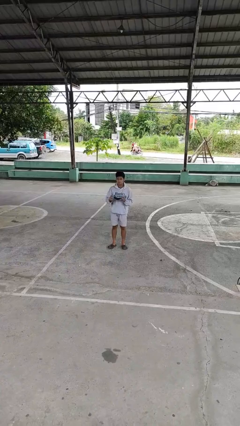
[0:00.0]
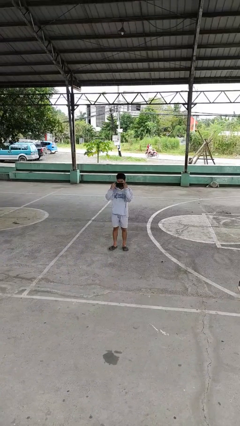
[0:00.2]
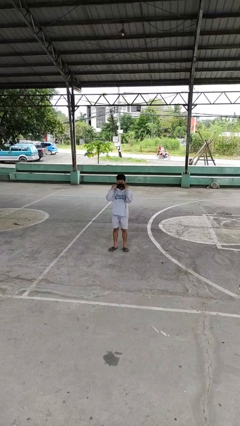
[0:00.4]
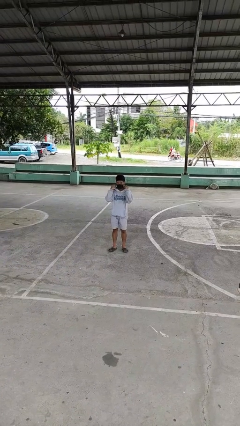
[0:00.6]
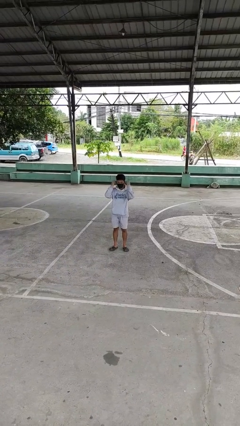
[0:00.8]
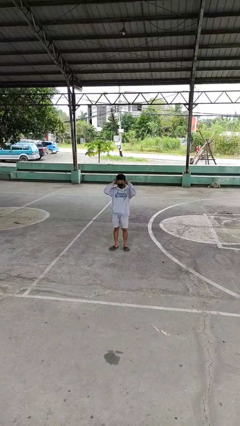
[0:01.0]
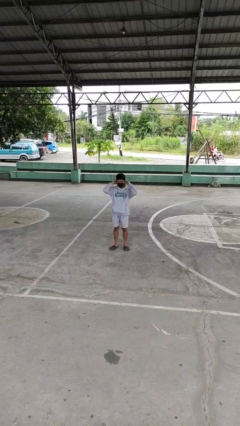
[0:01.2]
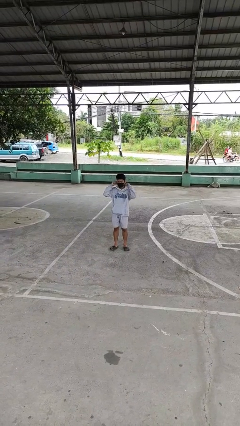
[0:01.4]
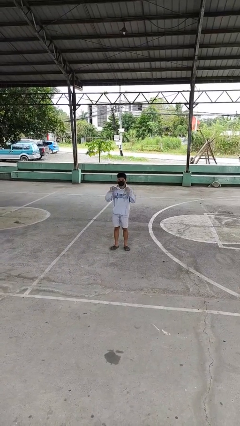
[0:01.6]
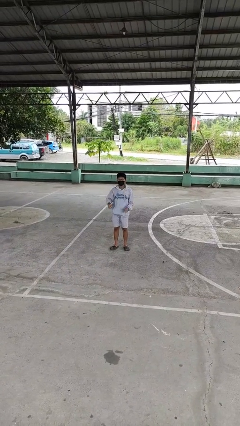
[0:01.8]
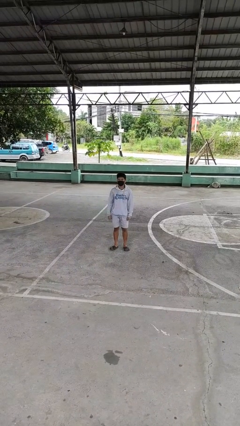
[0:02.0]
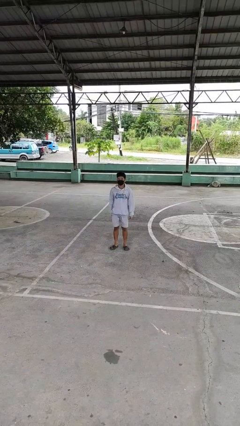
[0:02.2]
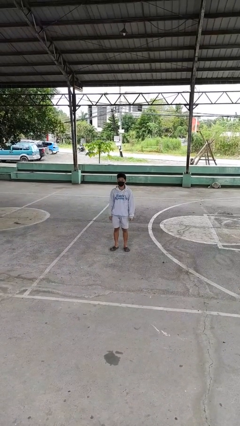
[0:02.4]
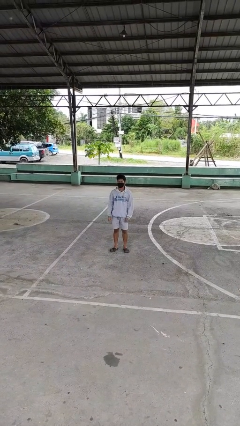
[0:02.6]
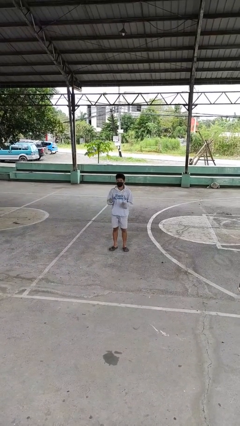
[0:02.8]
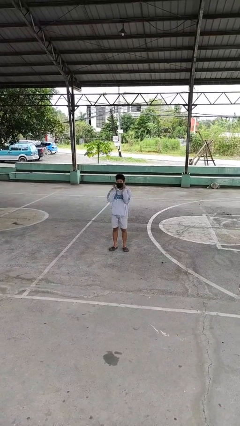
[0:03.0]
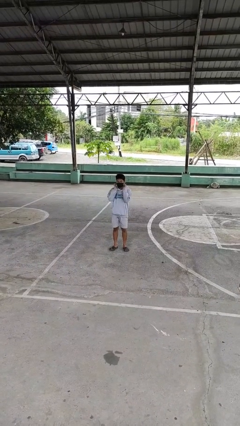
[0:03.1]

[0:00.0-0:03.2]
person puts on facemask

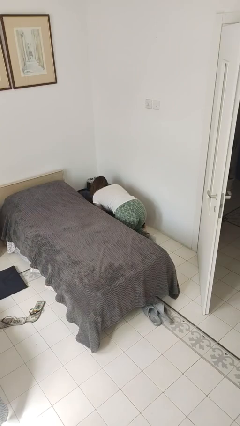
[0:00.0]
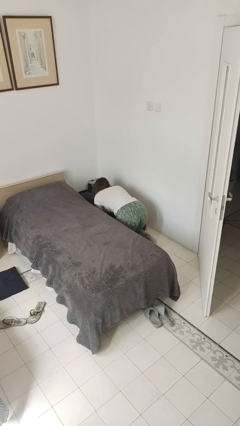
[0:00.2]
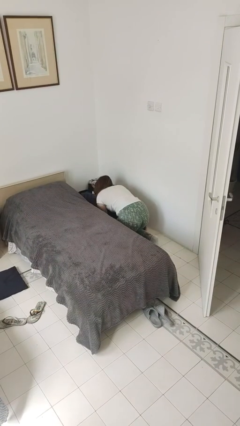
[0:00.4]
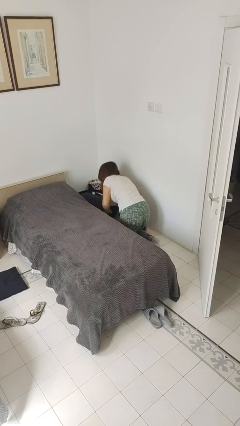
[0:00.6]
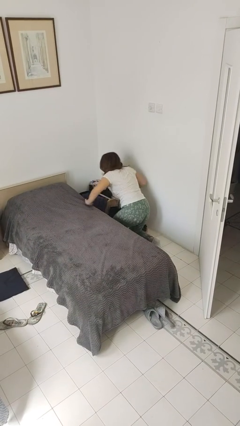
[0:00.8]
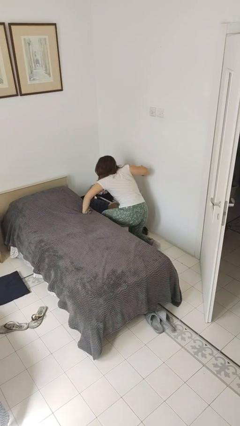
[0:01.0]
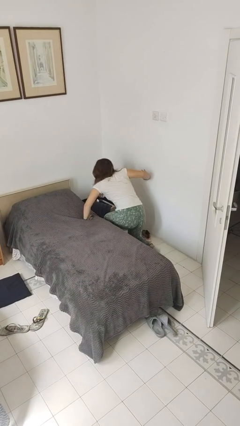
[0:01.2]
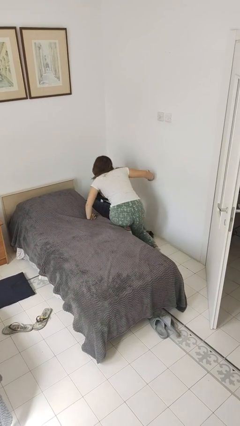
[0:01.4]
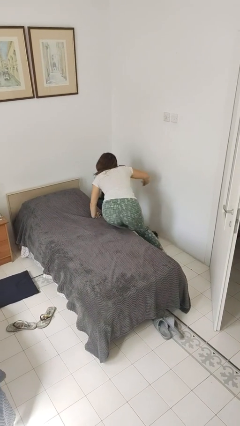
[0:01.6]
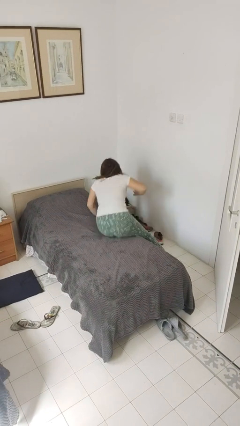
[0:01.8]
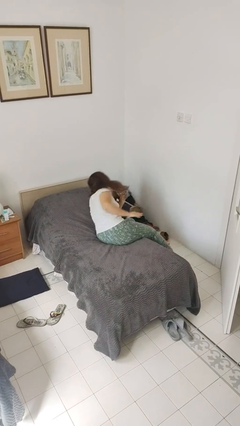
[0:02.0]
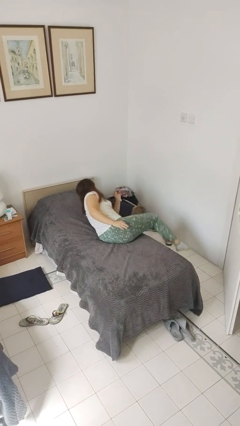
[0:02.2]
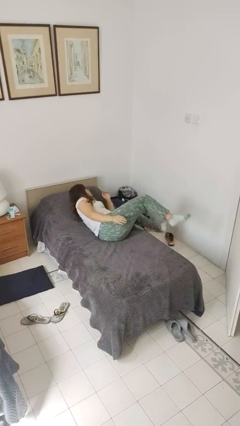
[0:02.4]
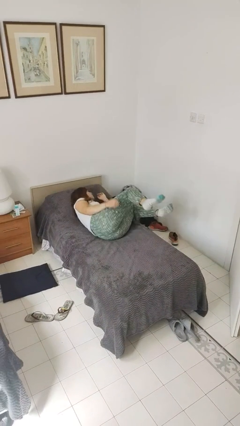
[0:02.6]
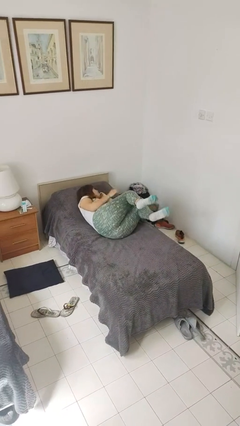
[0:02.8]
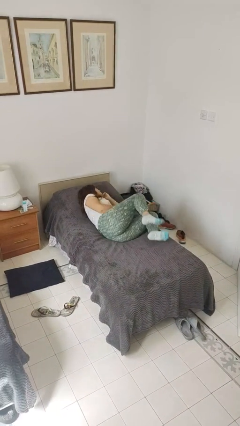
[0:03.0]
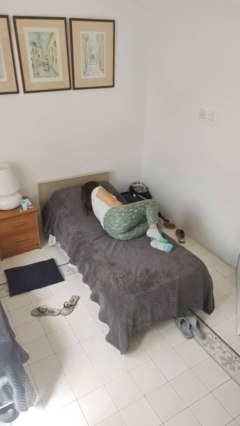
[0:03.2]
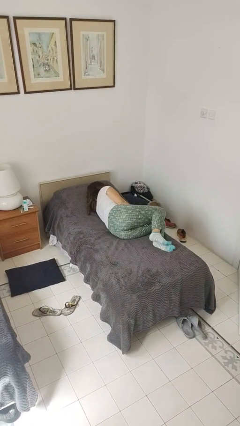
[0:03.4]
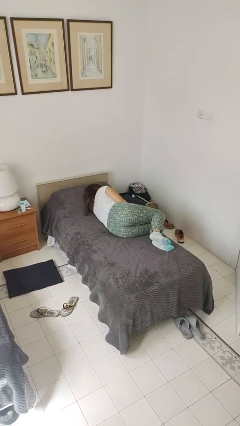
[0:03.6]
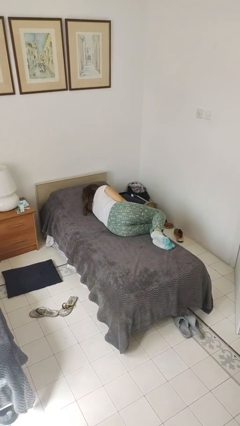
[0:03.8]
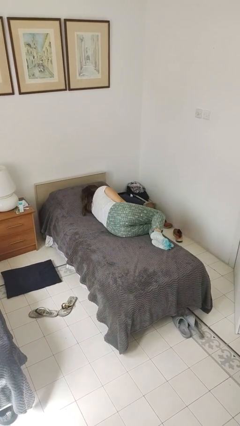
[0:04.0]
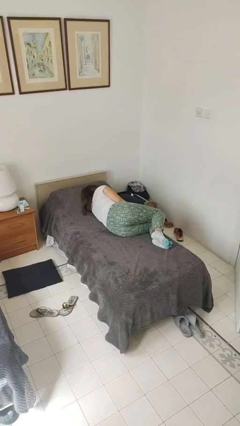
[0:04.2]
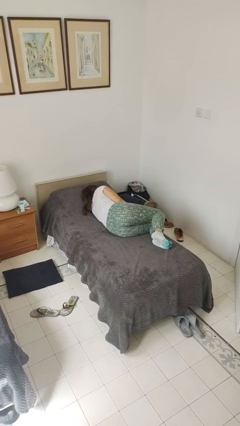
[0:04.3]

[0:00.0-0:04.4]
person lies down on bed

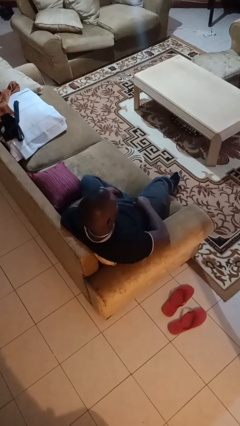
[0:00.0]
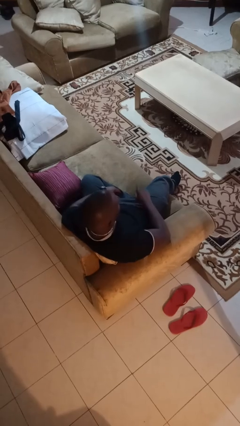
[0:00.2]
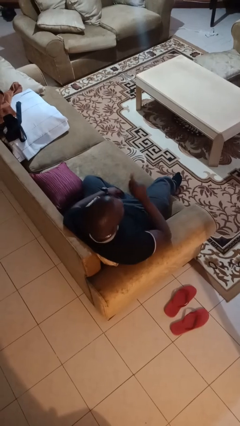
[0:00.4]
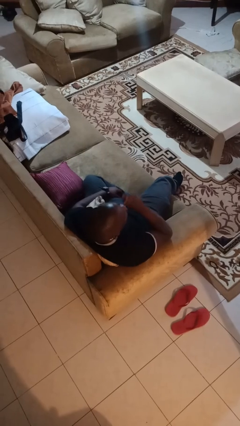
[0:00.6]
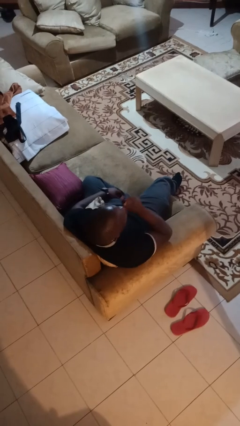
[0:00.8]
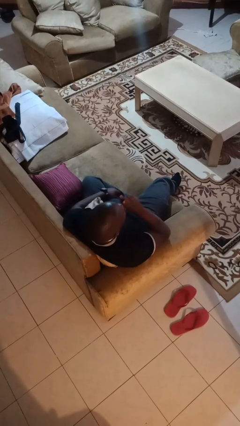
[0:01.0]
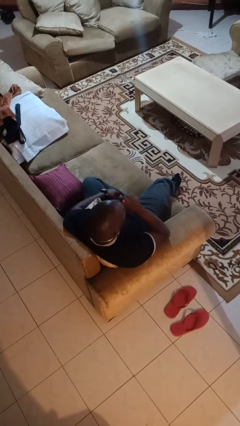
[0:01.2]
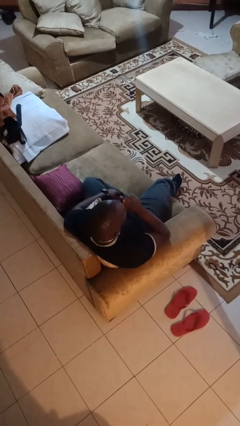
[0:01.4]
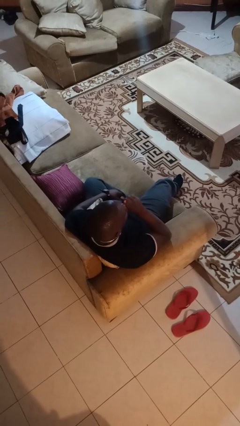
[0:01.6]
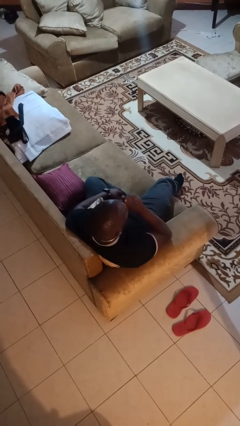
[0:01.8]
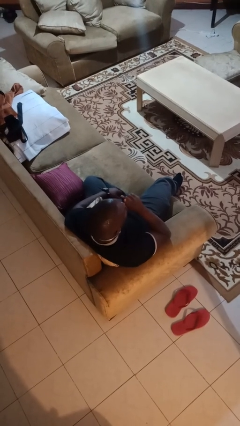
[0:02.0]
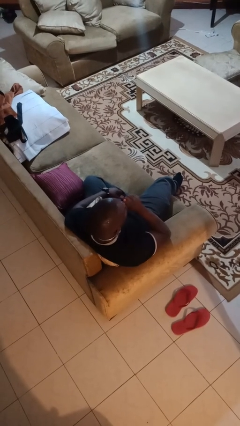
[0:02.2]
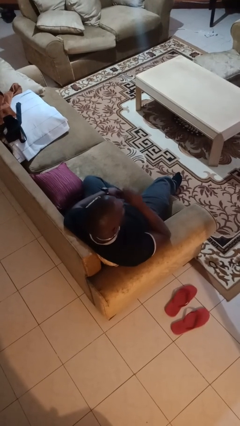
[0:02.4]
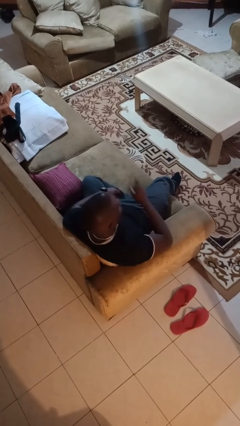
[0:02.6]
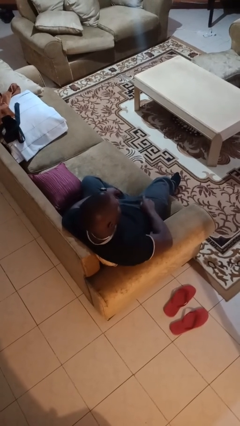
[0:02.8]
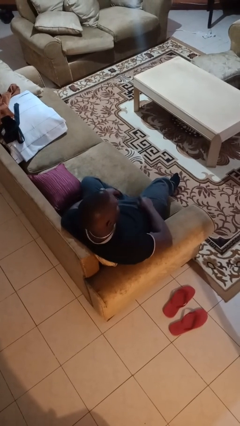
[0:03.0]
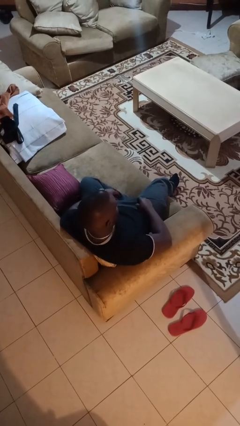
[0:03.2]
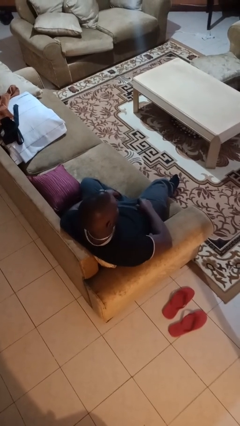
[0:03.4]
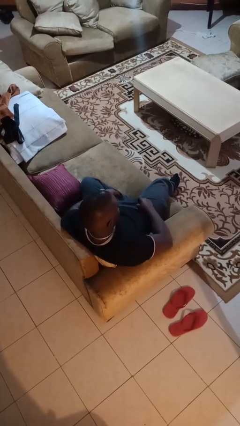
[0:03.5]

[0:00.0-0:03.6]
person gestures be quiet

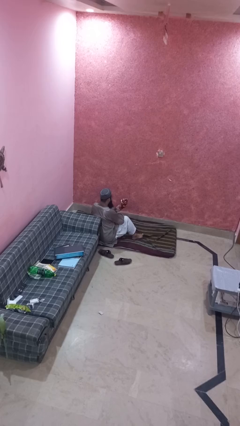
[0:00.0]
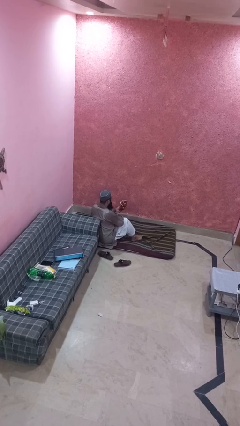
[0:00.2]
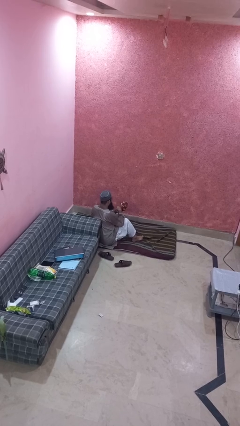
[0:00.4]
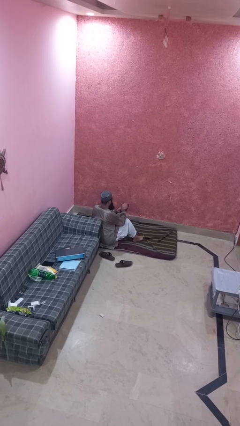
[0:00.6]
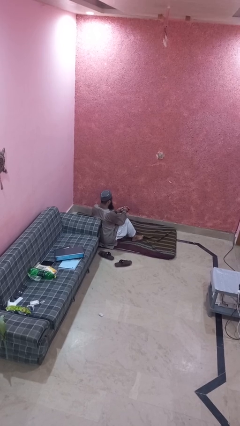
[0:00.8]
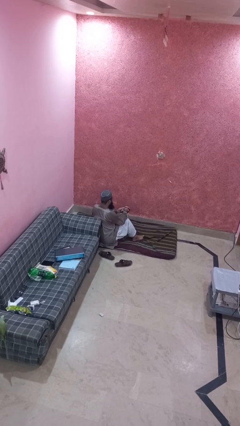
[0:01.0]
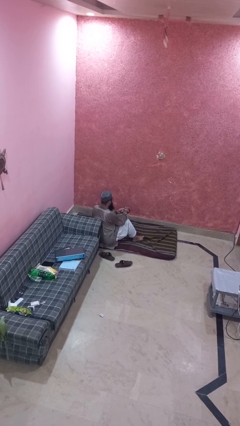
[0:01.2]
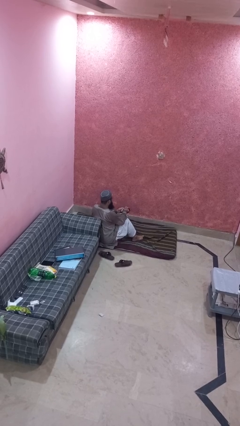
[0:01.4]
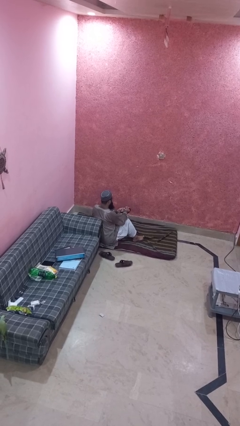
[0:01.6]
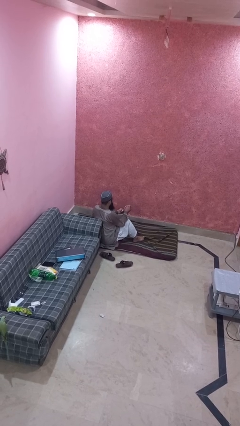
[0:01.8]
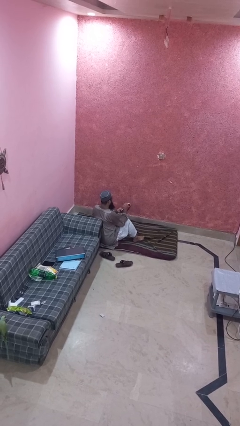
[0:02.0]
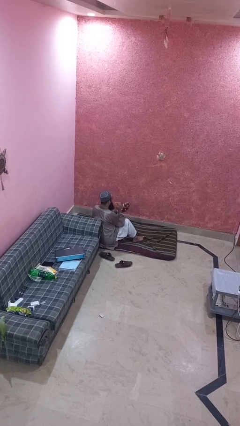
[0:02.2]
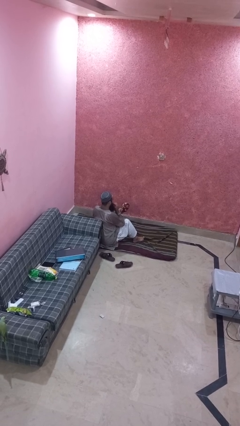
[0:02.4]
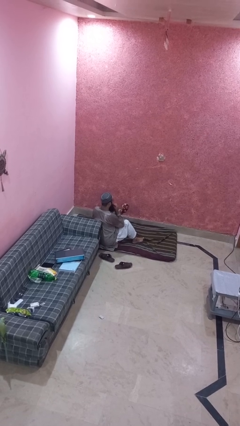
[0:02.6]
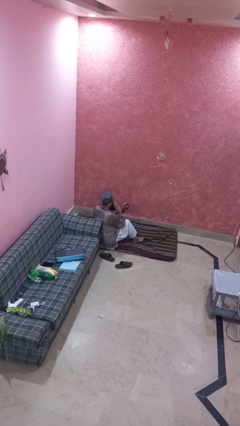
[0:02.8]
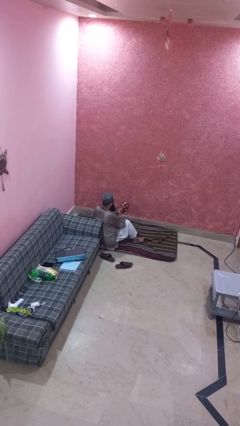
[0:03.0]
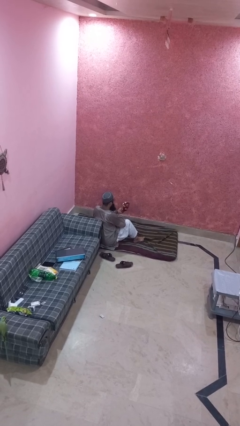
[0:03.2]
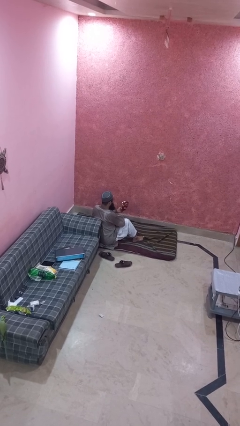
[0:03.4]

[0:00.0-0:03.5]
person eats snack from bag

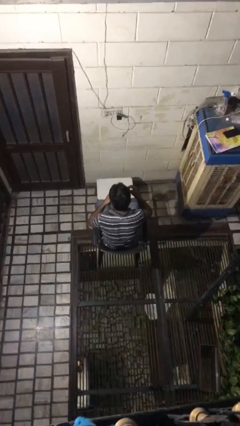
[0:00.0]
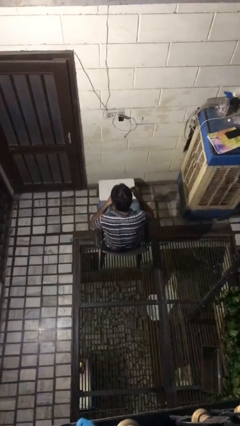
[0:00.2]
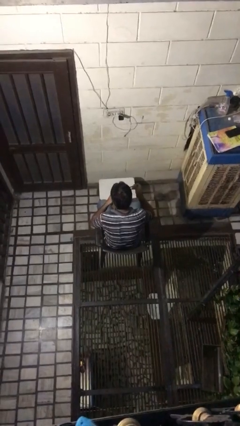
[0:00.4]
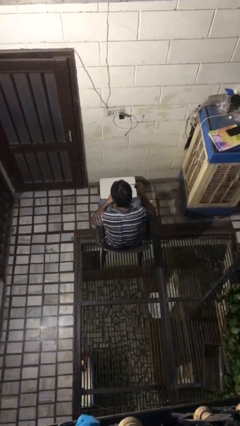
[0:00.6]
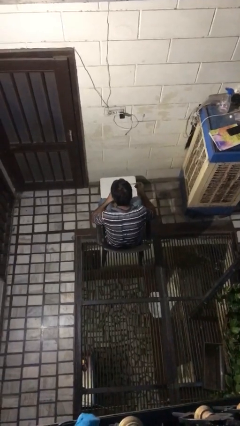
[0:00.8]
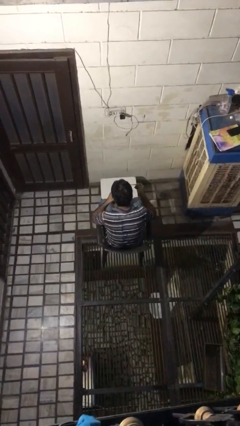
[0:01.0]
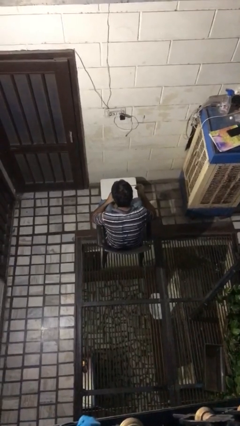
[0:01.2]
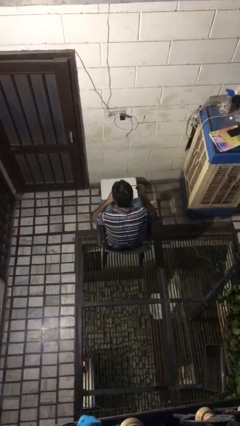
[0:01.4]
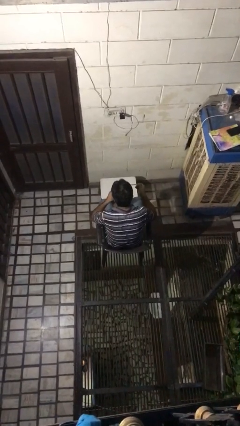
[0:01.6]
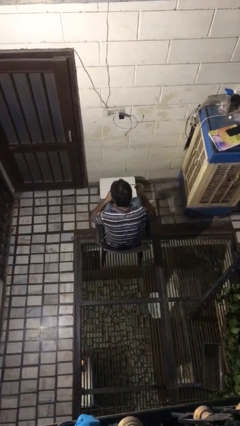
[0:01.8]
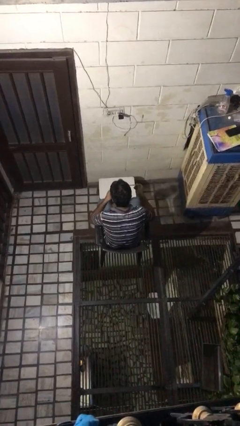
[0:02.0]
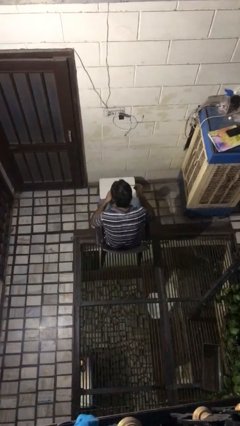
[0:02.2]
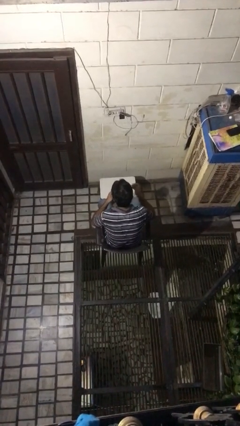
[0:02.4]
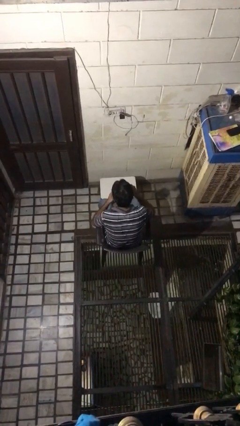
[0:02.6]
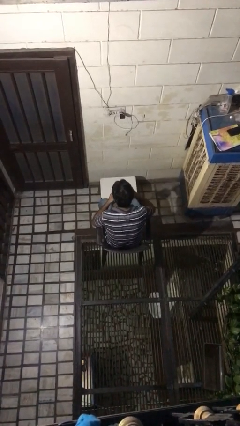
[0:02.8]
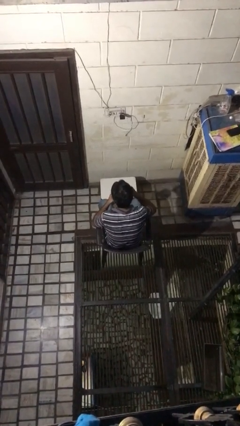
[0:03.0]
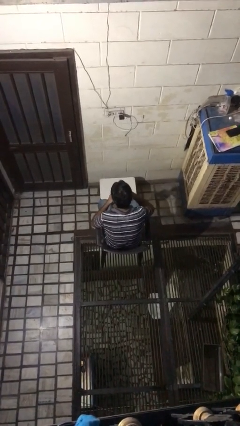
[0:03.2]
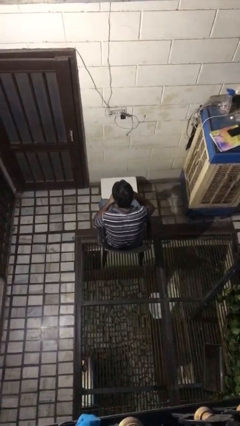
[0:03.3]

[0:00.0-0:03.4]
person drinks from mug
